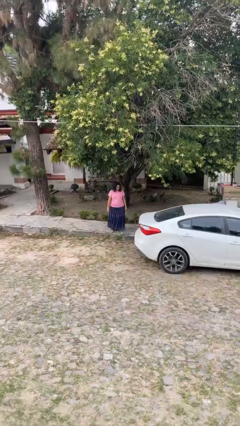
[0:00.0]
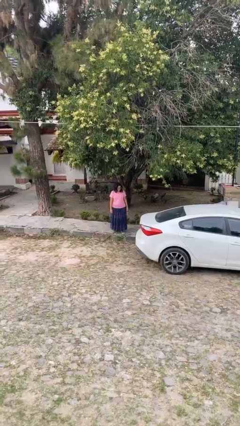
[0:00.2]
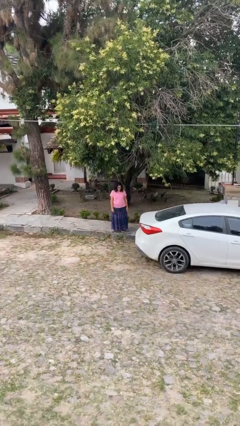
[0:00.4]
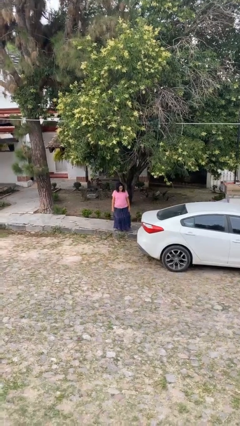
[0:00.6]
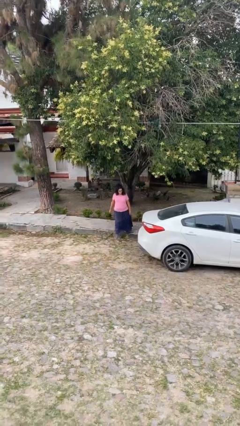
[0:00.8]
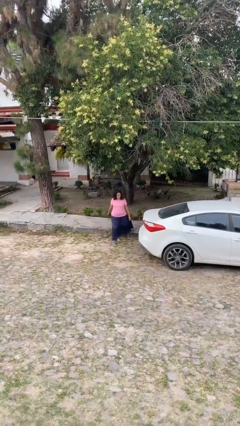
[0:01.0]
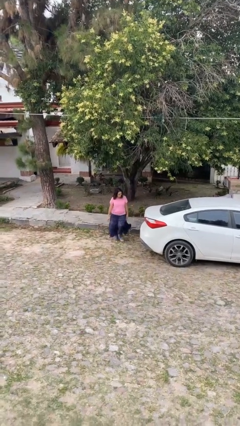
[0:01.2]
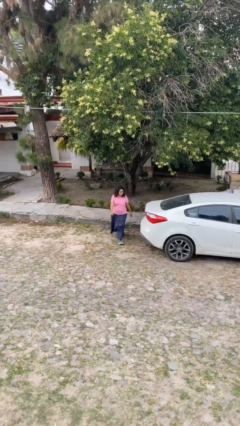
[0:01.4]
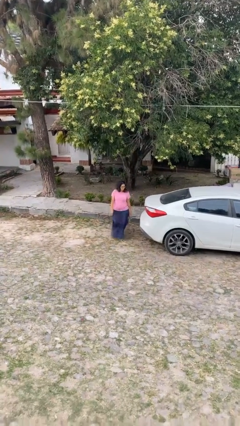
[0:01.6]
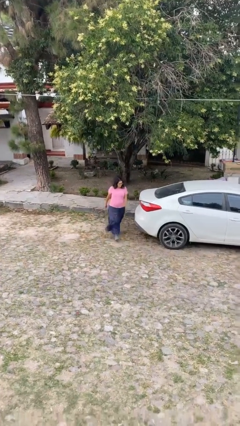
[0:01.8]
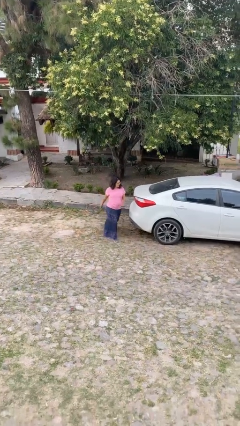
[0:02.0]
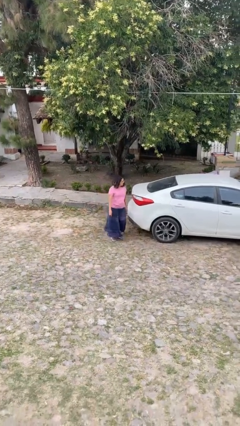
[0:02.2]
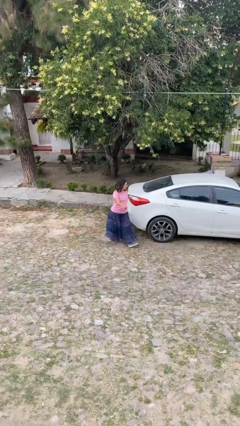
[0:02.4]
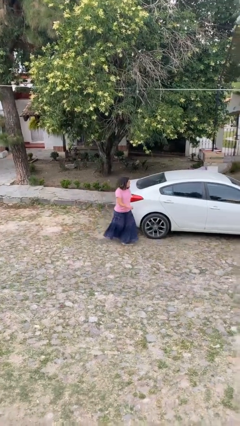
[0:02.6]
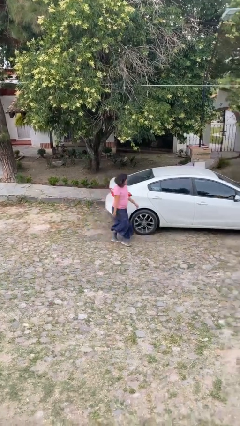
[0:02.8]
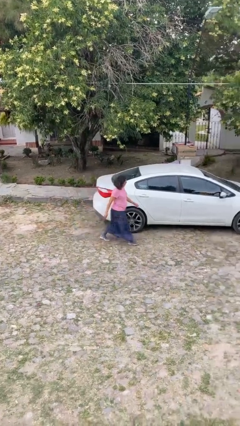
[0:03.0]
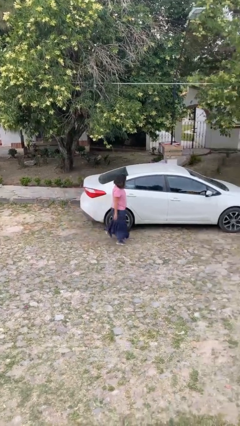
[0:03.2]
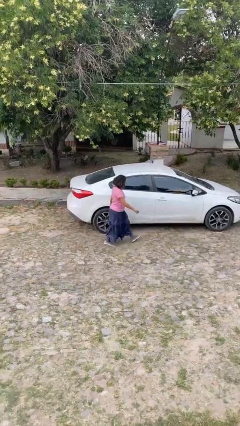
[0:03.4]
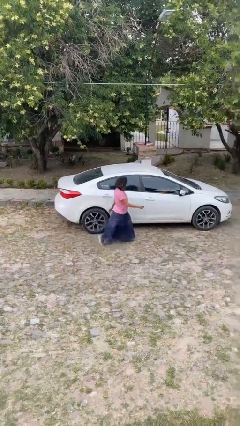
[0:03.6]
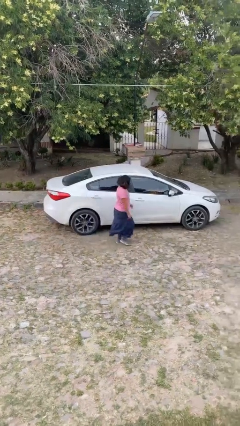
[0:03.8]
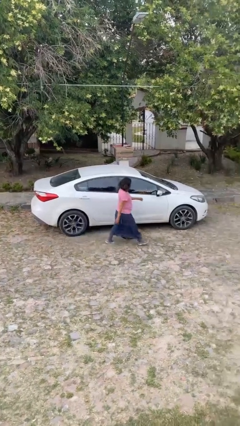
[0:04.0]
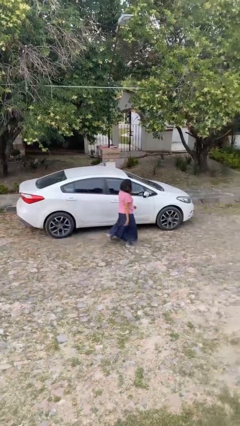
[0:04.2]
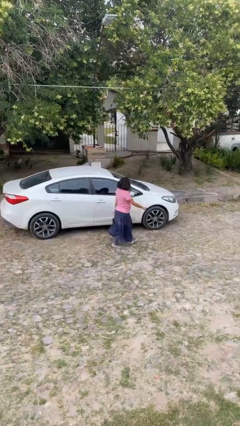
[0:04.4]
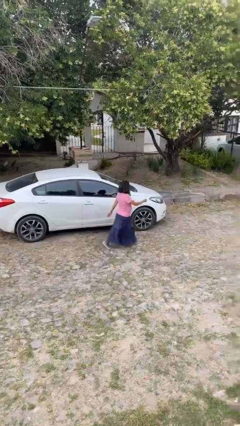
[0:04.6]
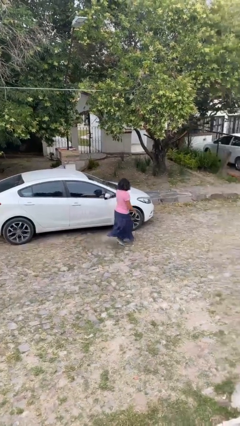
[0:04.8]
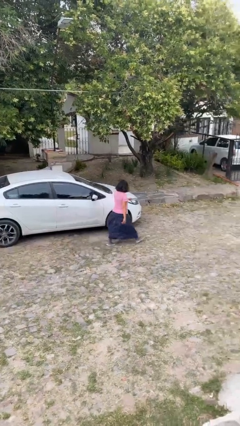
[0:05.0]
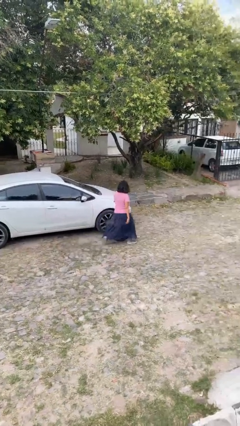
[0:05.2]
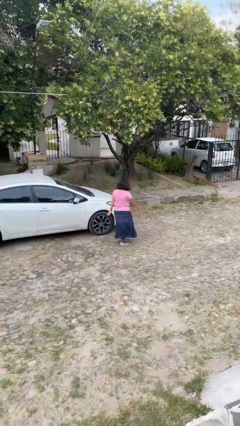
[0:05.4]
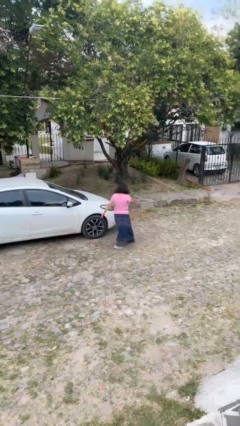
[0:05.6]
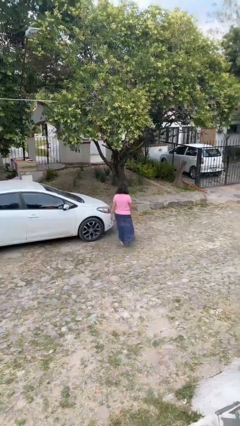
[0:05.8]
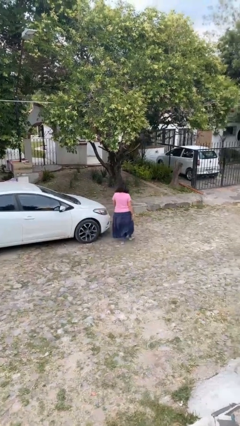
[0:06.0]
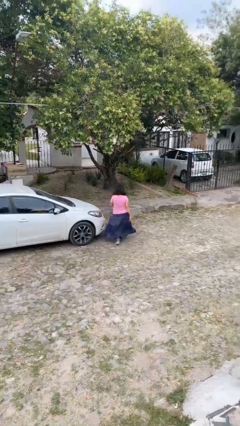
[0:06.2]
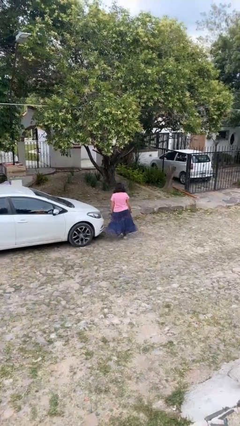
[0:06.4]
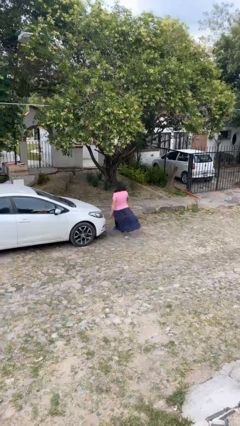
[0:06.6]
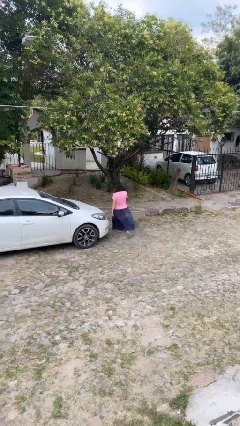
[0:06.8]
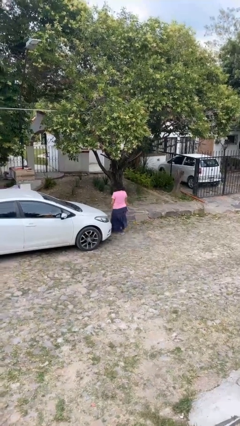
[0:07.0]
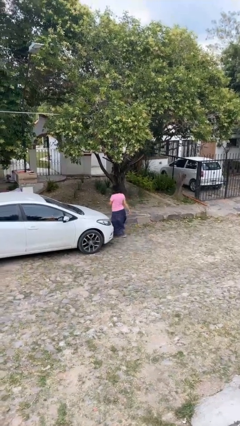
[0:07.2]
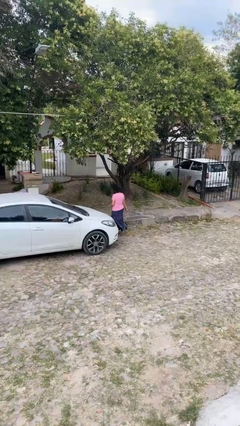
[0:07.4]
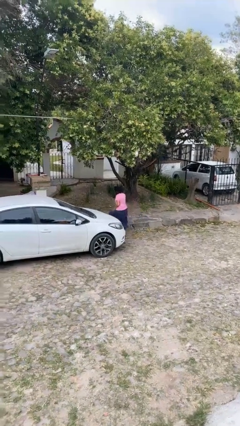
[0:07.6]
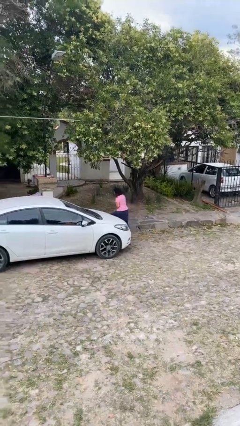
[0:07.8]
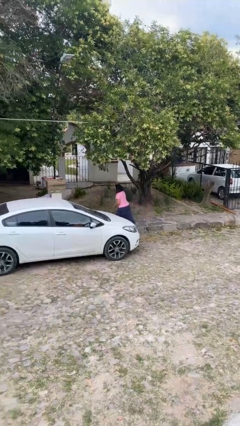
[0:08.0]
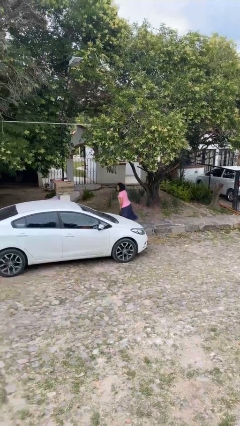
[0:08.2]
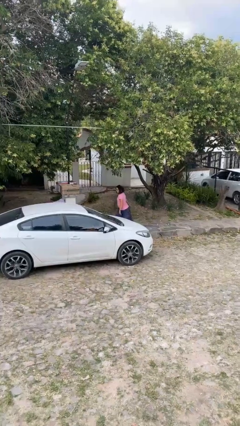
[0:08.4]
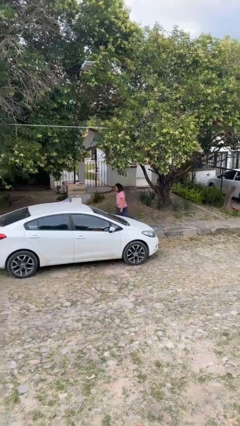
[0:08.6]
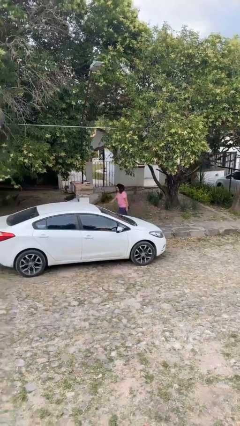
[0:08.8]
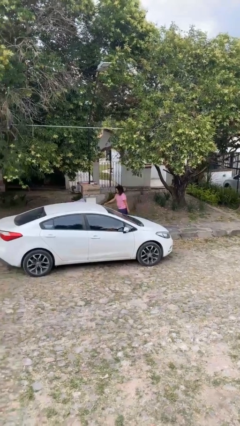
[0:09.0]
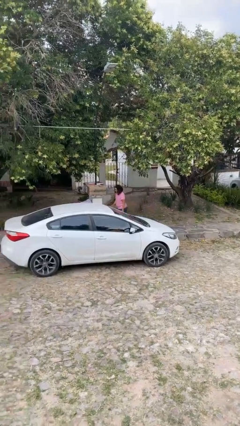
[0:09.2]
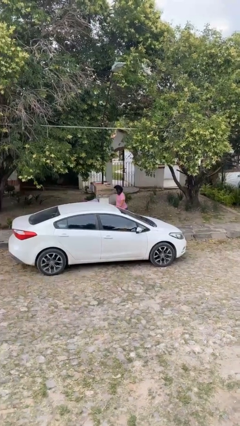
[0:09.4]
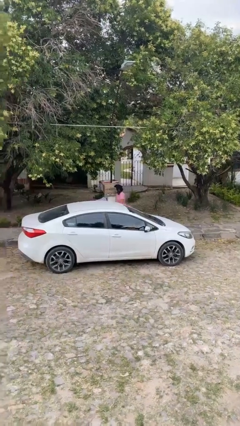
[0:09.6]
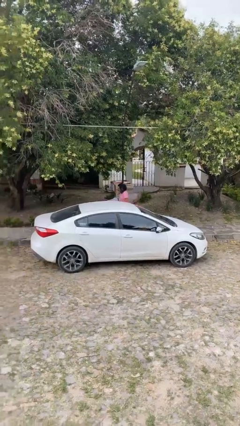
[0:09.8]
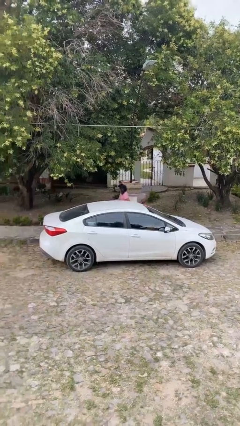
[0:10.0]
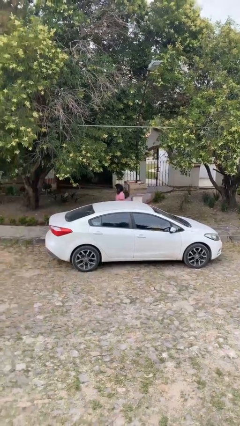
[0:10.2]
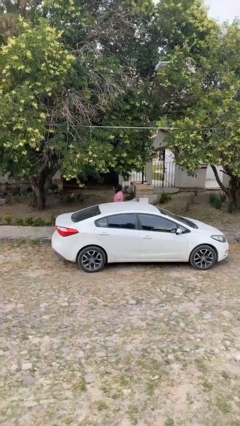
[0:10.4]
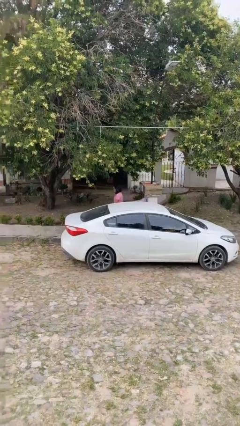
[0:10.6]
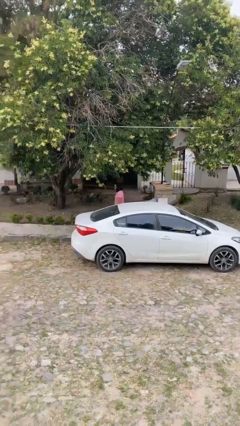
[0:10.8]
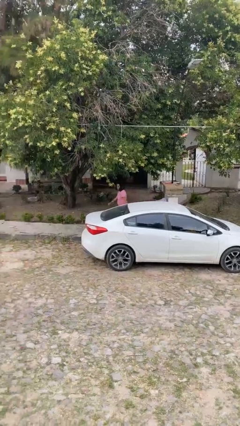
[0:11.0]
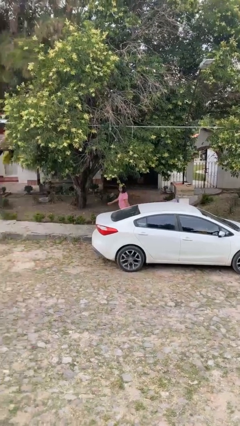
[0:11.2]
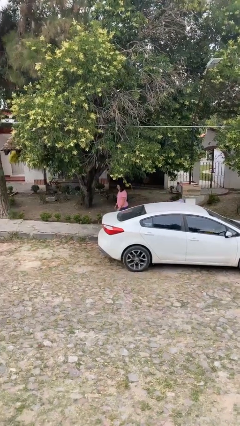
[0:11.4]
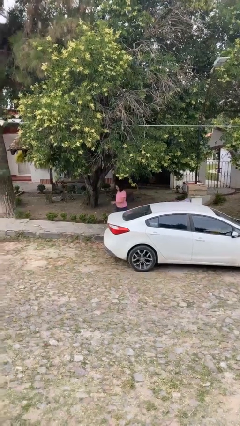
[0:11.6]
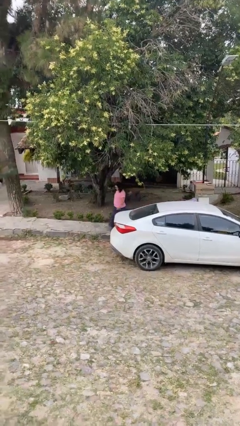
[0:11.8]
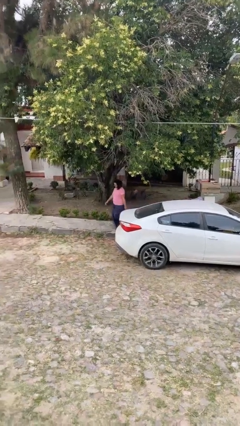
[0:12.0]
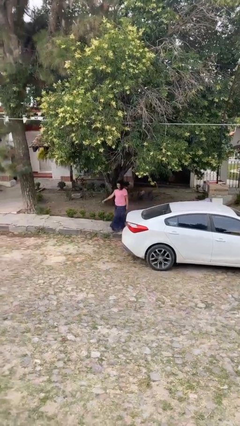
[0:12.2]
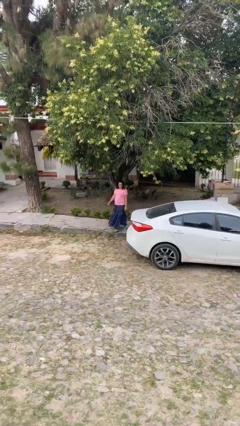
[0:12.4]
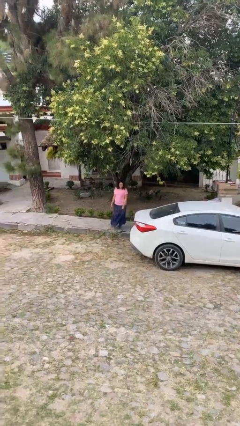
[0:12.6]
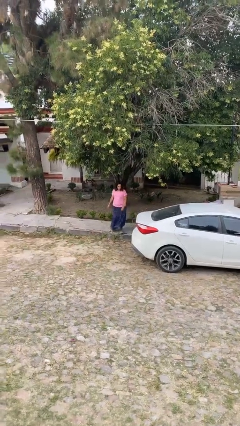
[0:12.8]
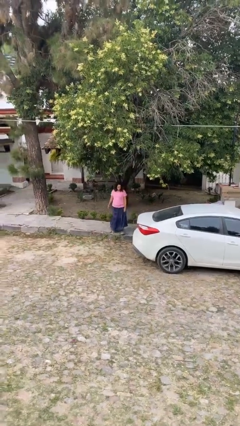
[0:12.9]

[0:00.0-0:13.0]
person walks around car

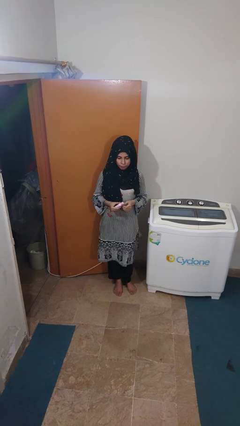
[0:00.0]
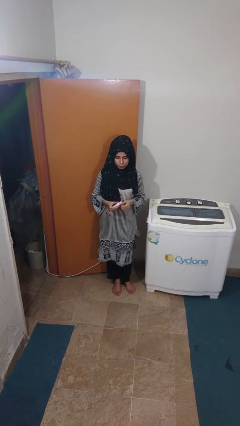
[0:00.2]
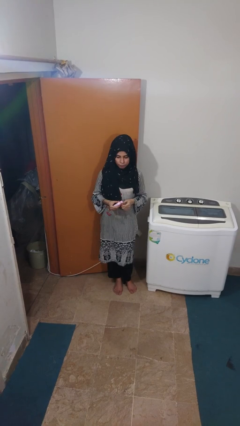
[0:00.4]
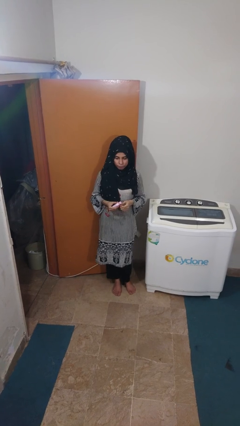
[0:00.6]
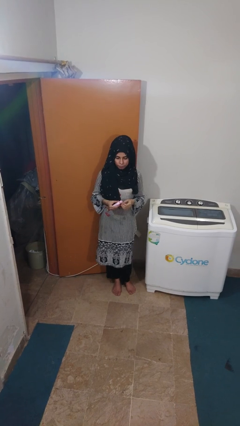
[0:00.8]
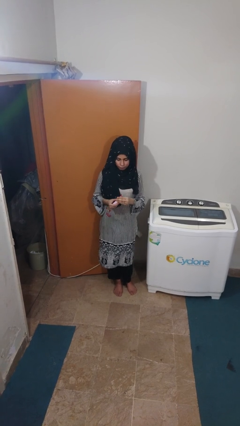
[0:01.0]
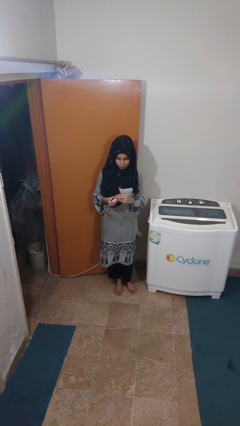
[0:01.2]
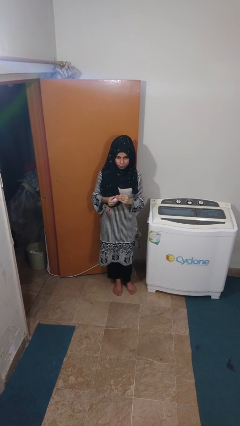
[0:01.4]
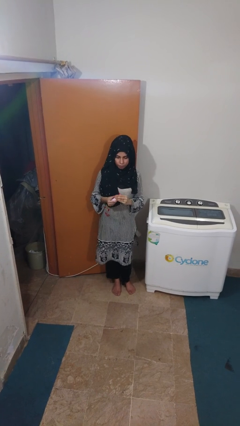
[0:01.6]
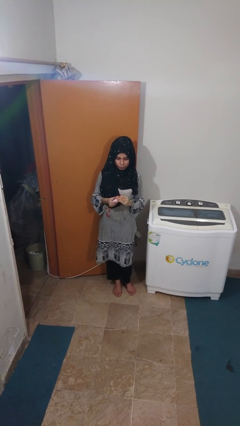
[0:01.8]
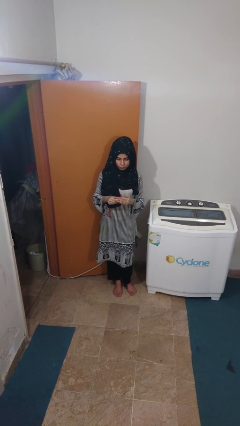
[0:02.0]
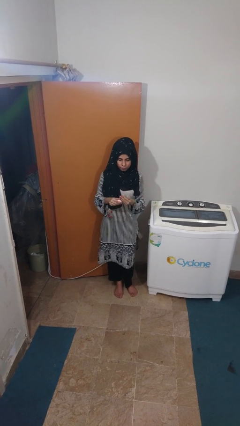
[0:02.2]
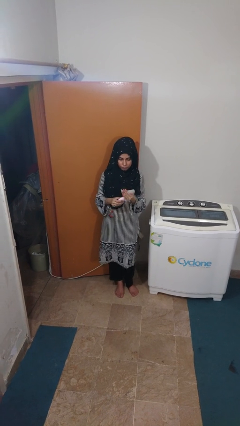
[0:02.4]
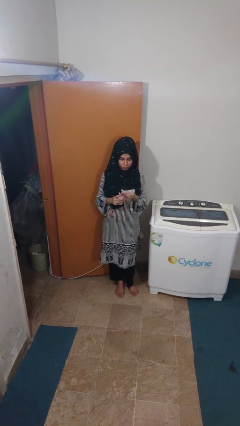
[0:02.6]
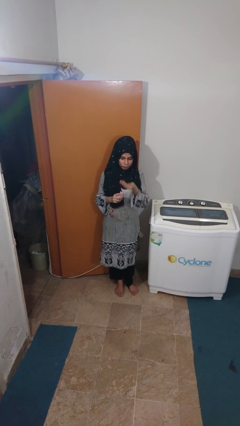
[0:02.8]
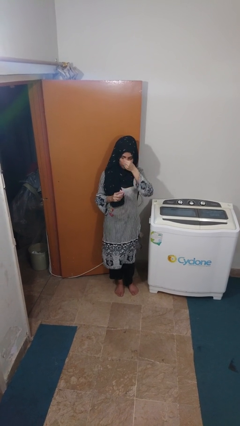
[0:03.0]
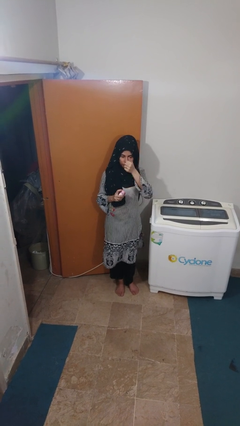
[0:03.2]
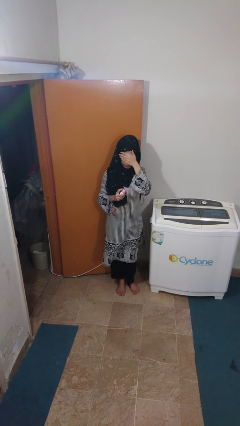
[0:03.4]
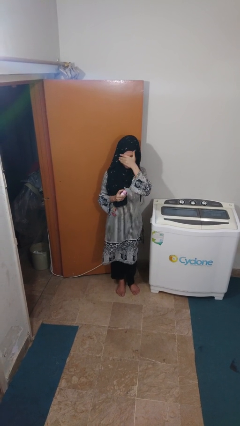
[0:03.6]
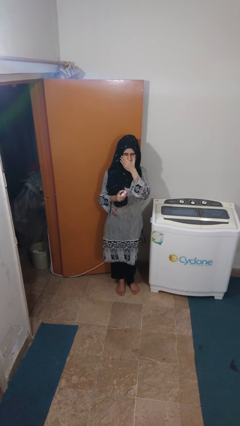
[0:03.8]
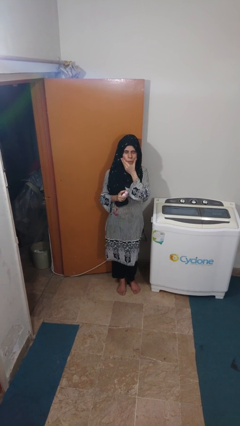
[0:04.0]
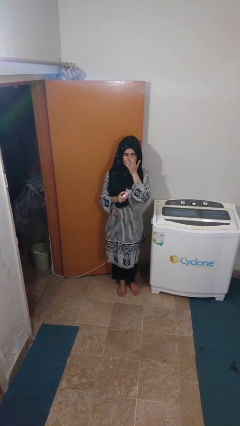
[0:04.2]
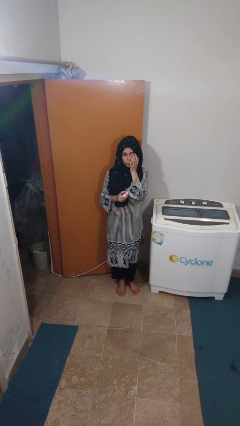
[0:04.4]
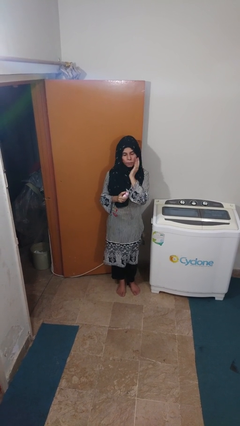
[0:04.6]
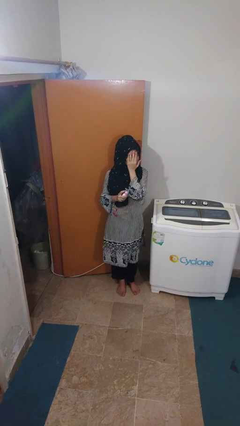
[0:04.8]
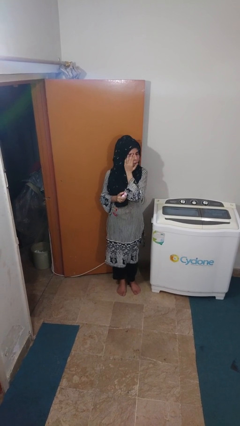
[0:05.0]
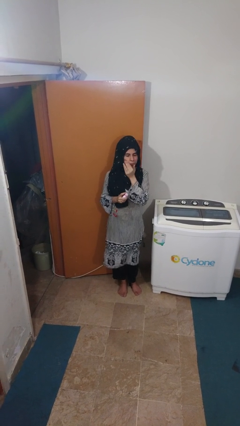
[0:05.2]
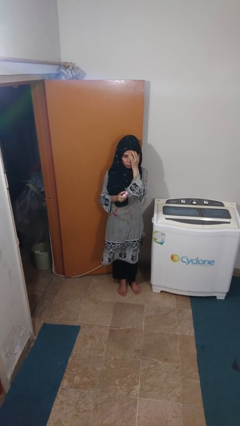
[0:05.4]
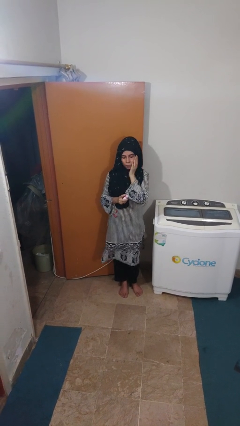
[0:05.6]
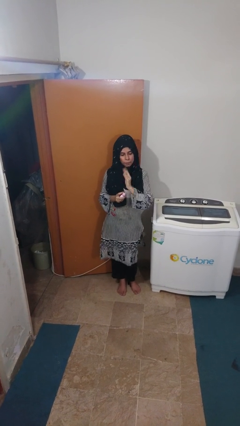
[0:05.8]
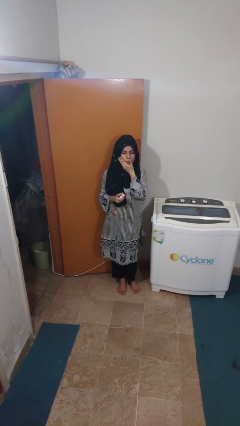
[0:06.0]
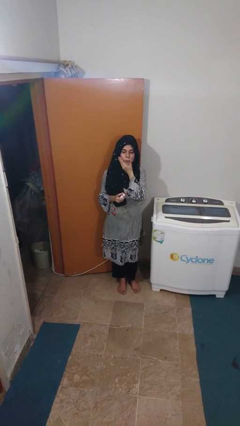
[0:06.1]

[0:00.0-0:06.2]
person applies sunscreen
